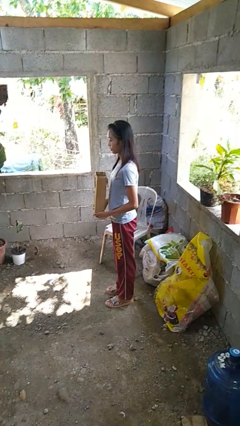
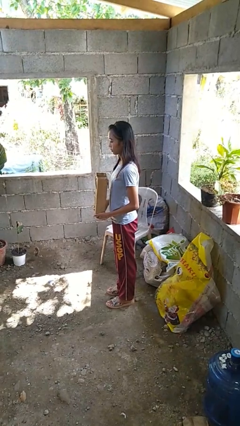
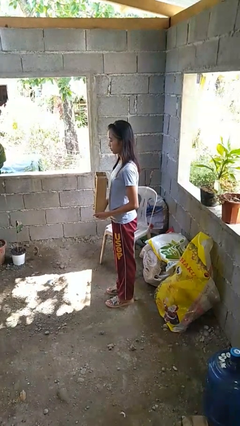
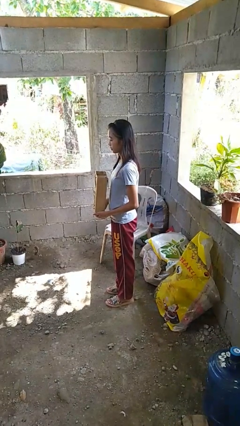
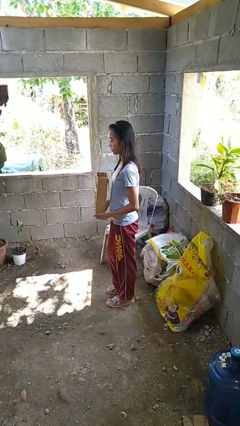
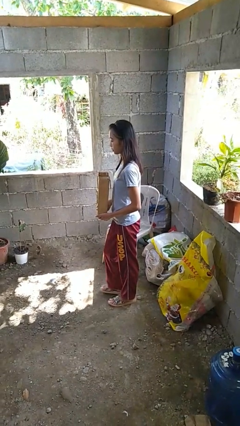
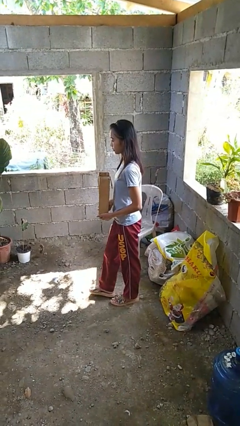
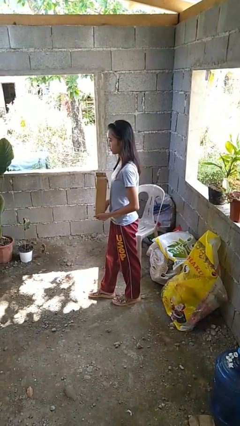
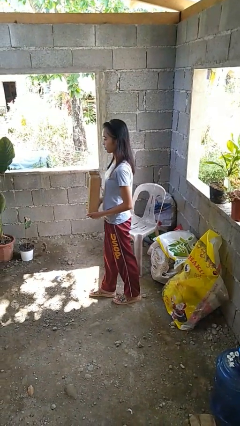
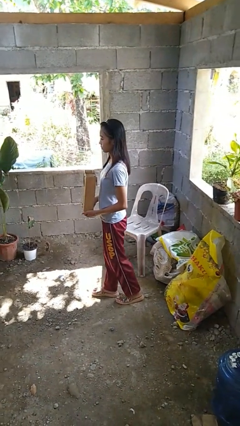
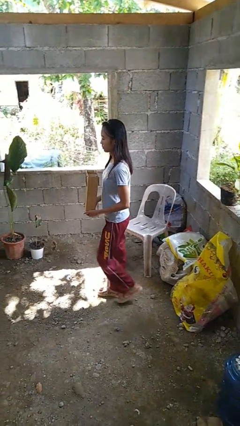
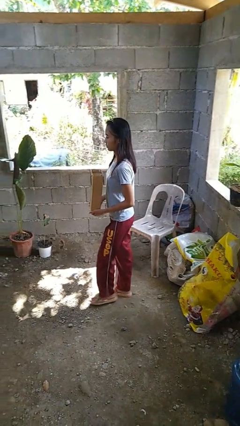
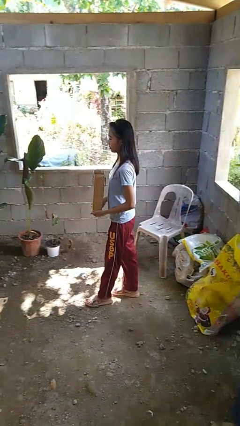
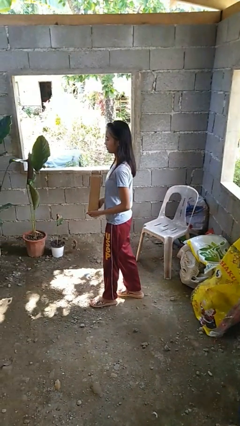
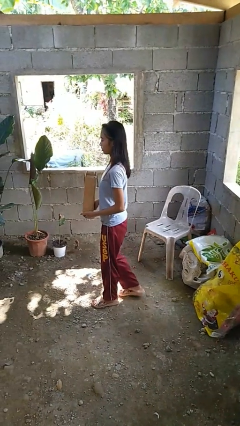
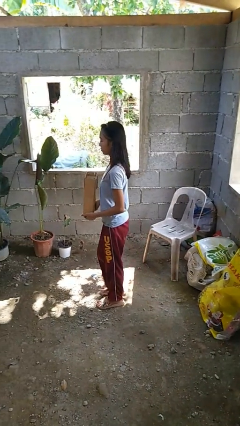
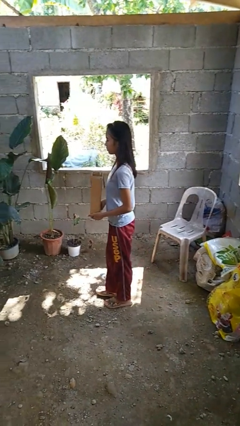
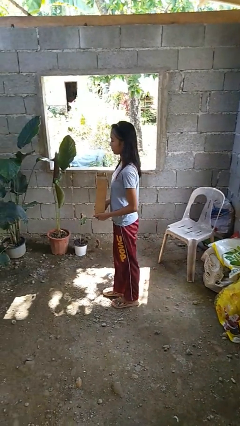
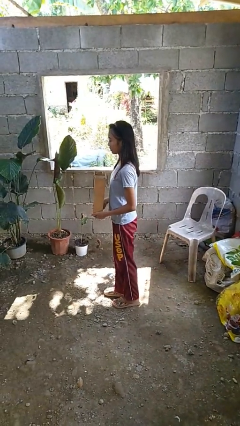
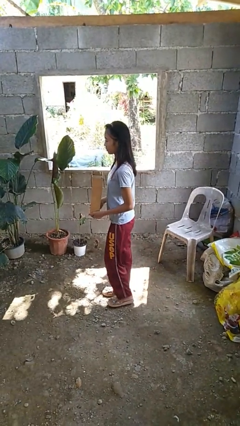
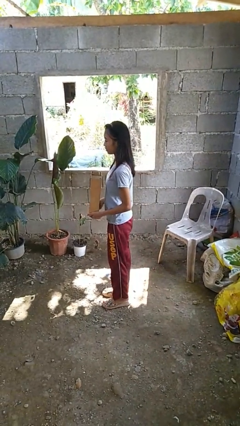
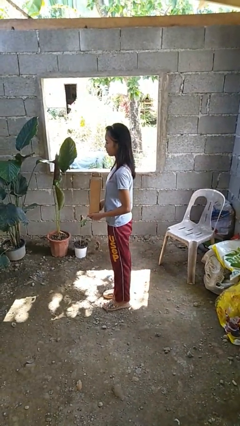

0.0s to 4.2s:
person carries groceries

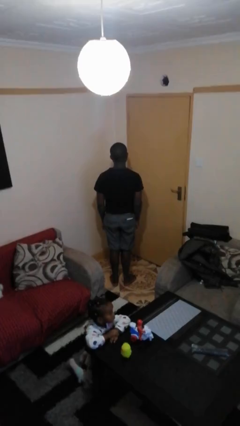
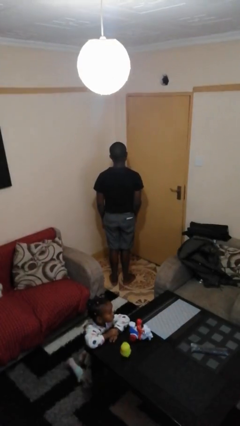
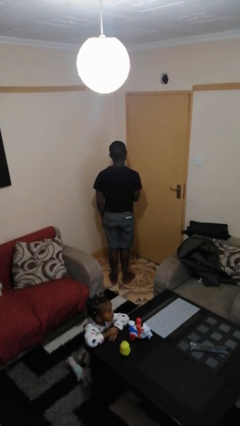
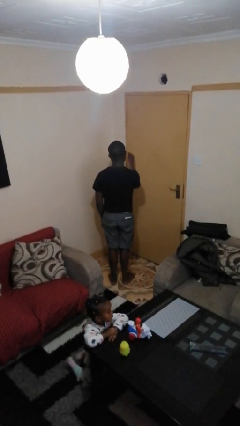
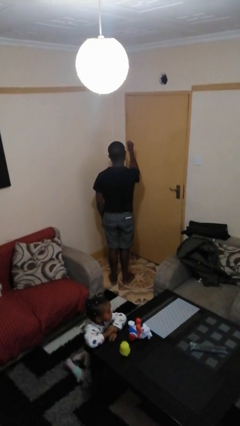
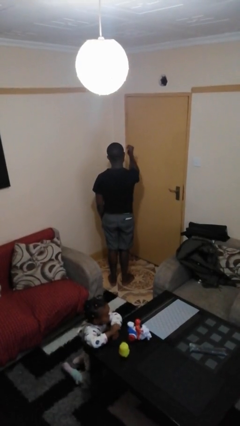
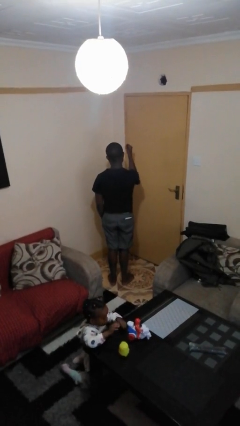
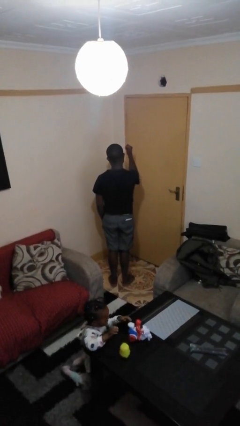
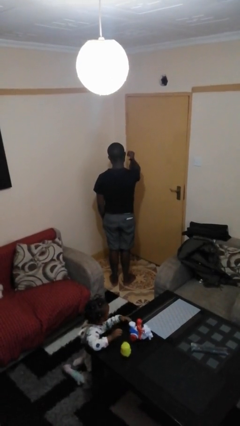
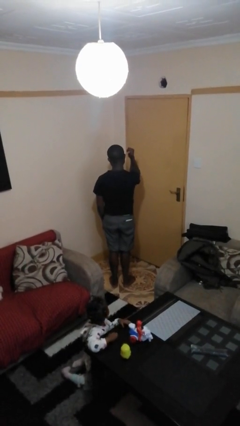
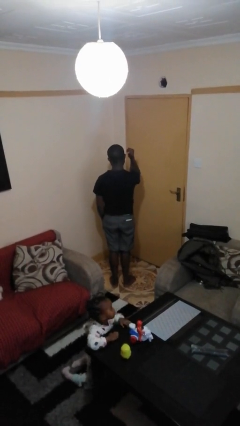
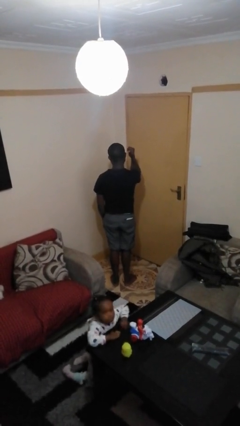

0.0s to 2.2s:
person gestures behind me

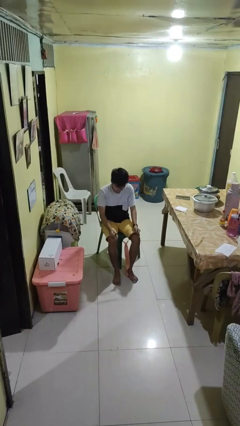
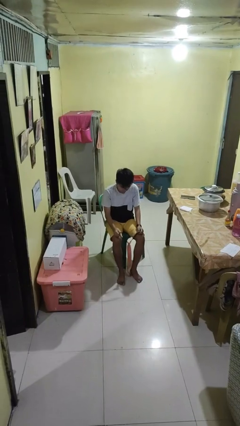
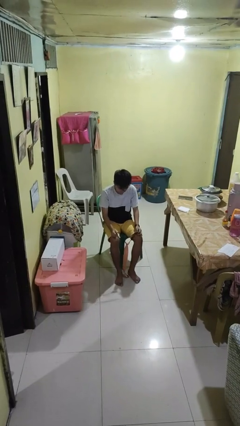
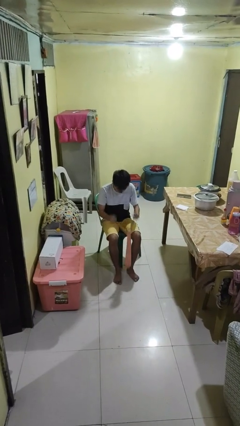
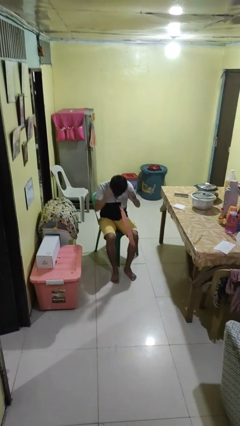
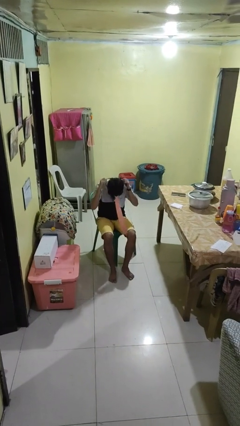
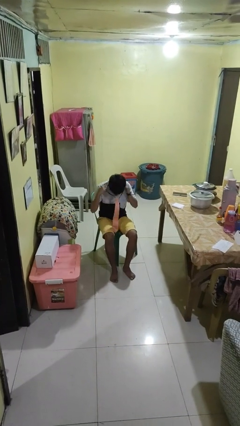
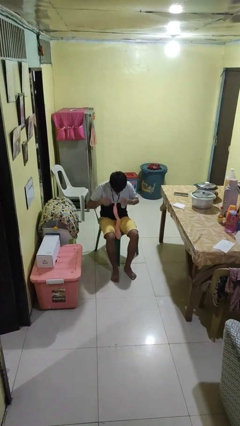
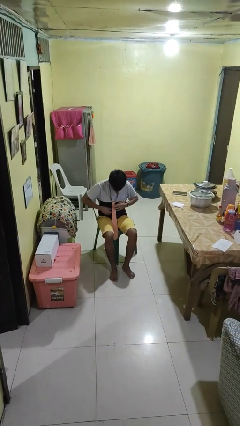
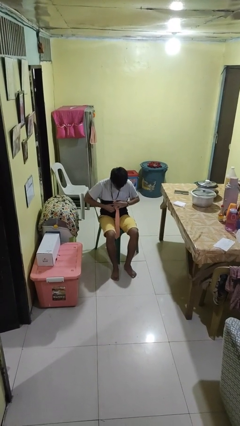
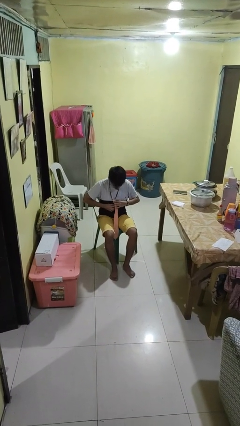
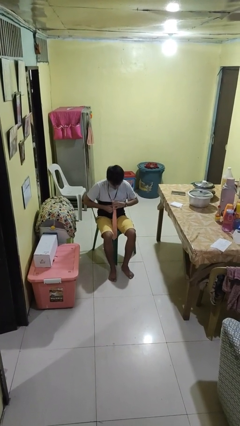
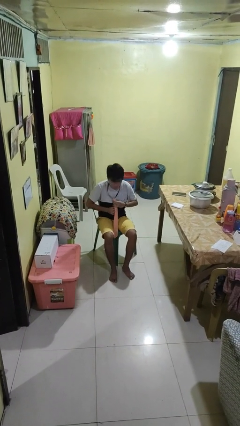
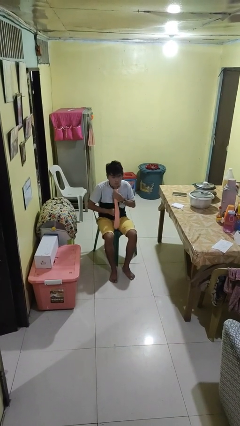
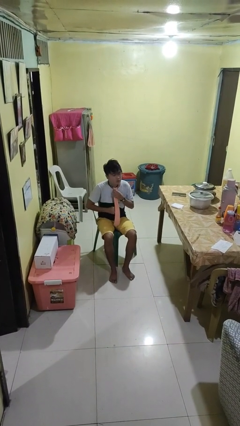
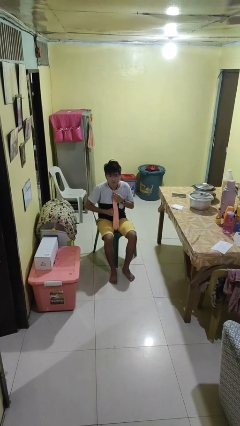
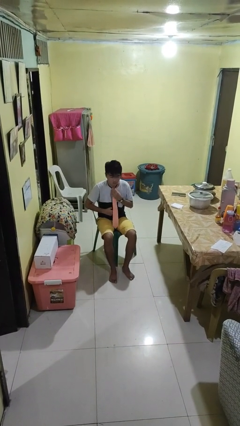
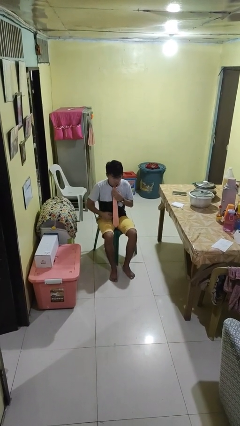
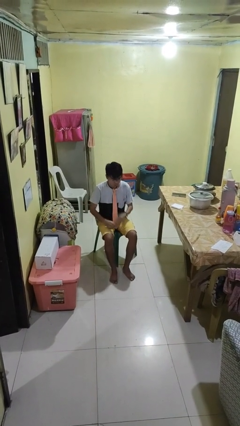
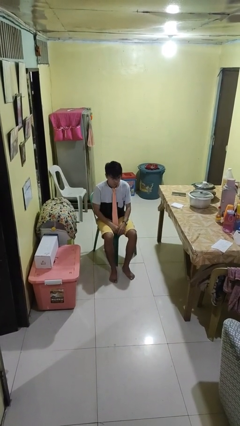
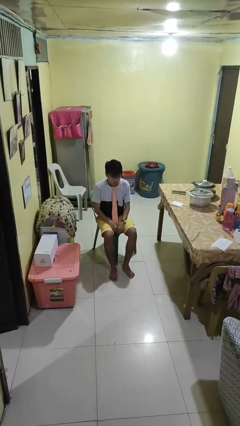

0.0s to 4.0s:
person puts on necktie

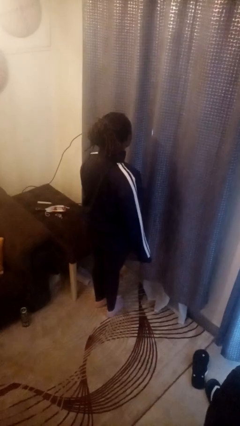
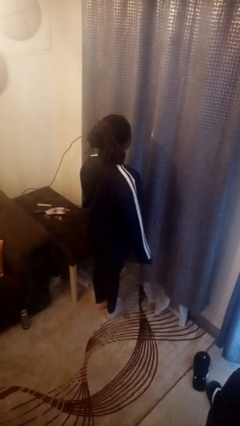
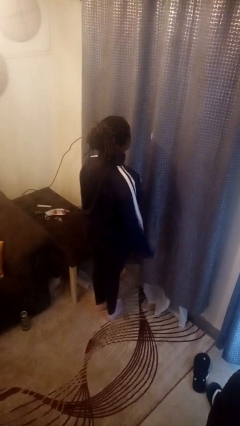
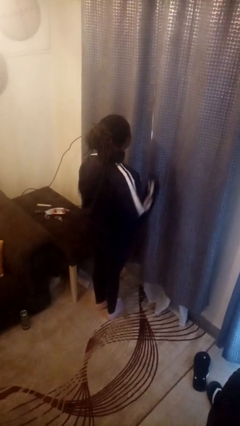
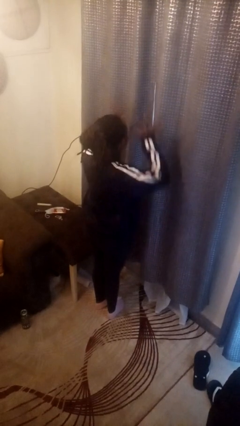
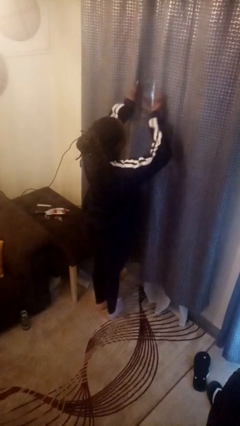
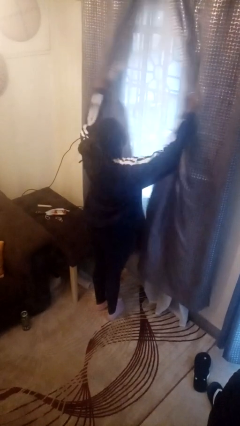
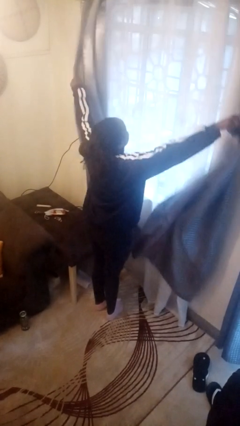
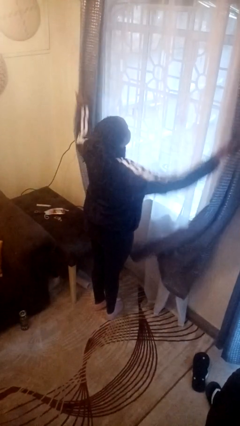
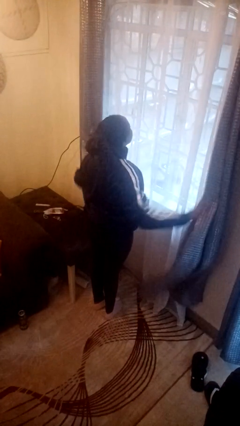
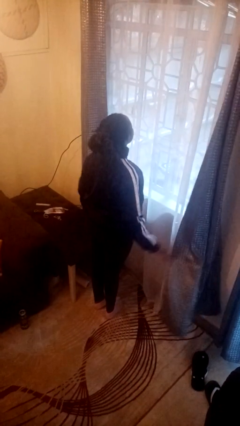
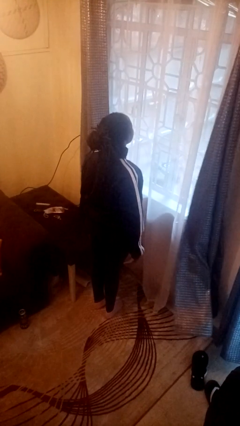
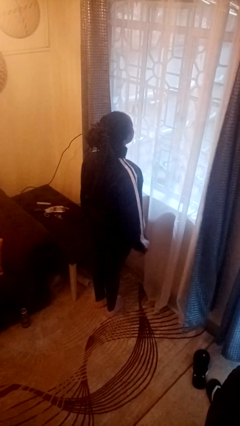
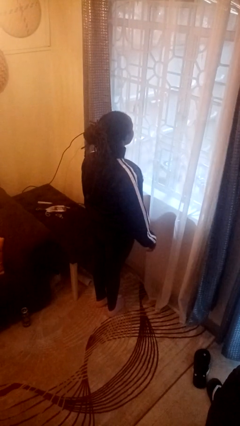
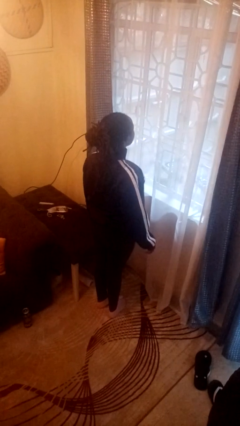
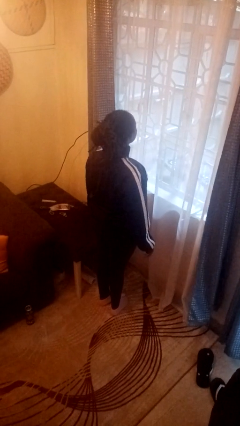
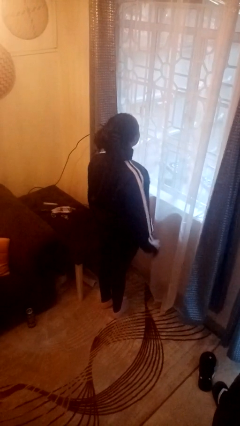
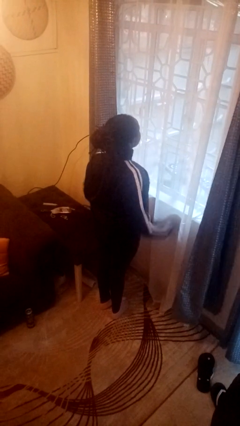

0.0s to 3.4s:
person opens curtains

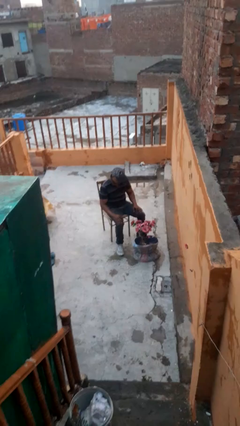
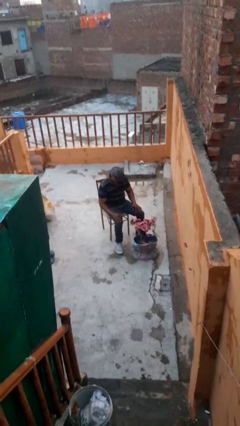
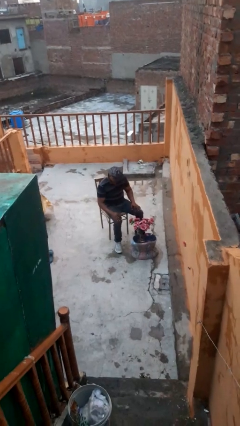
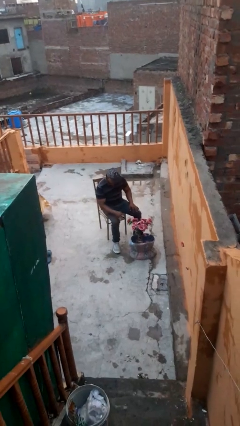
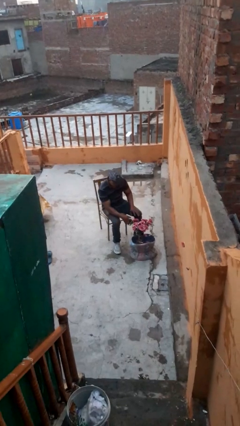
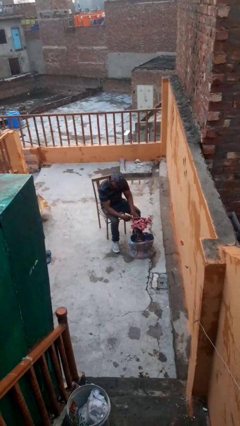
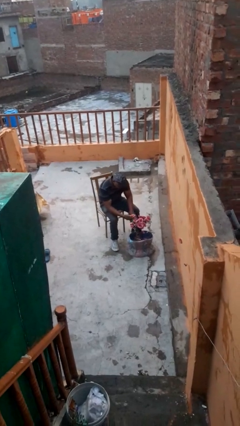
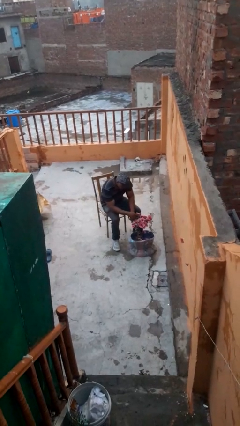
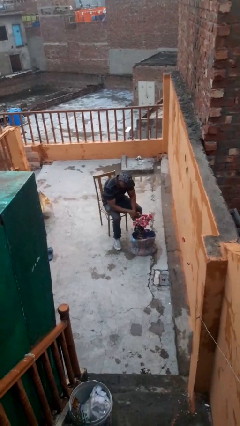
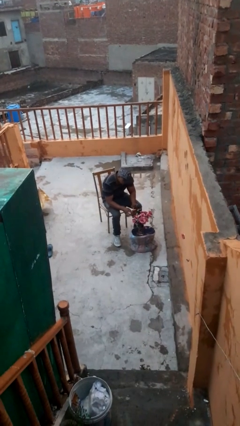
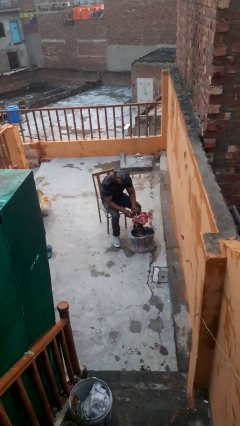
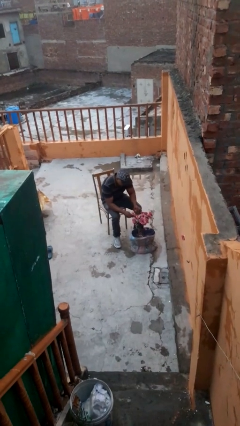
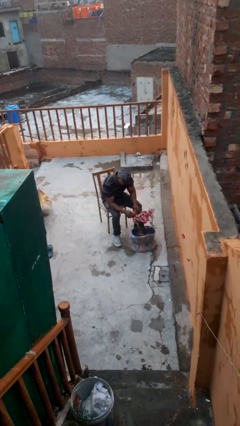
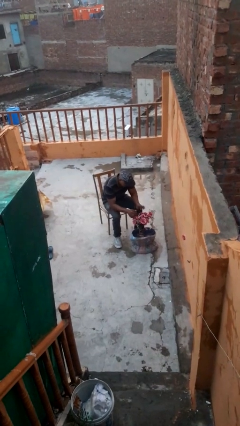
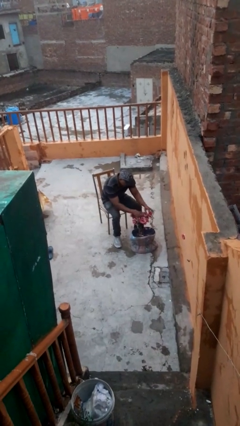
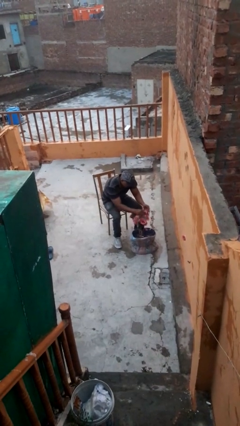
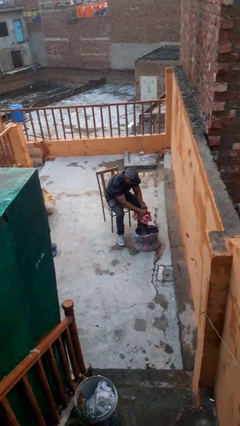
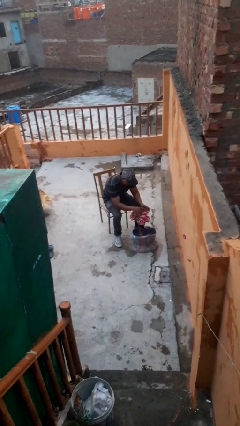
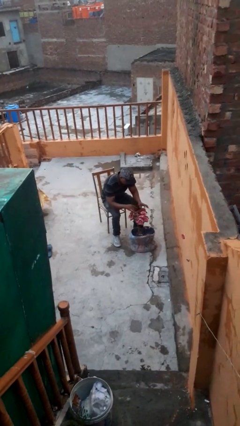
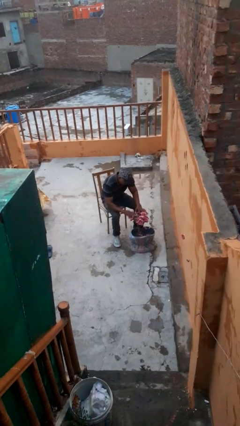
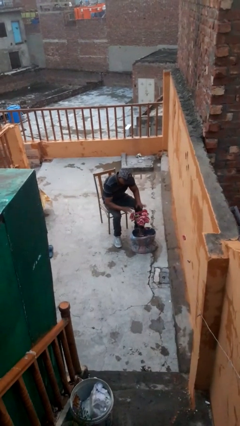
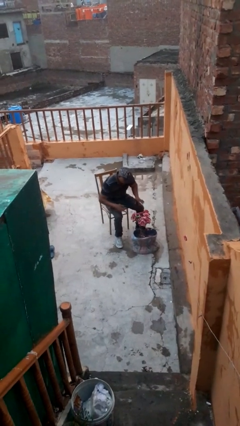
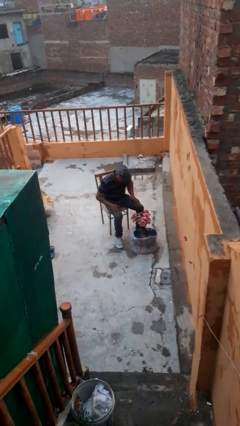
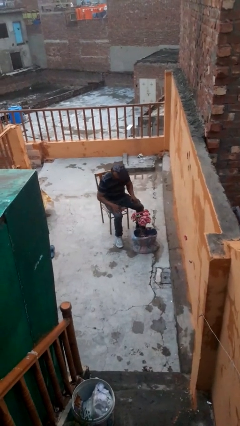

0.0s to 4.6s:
person arranges flowers in vase
